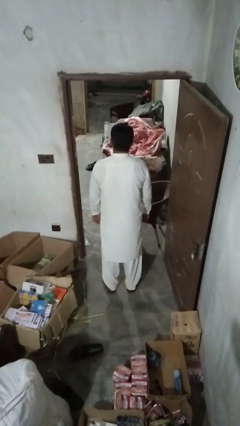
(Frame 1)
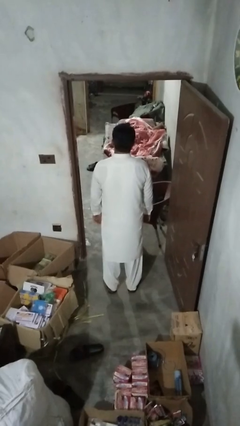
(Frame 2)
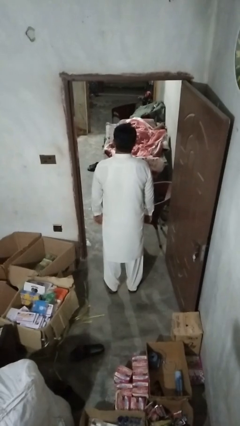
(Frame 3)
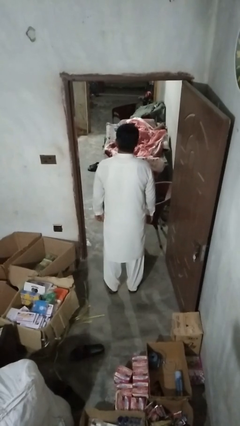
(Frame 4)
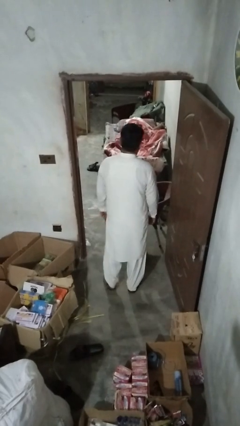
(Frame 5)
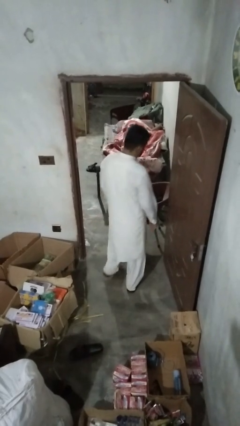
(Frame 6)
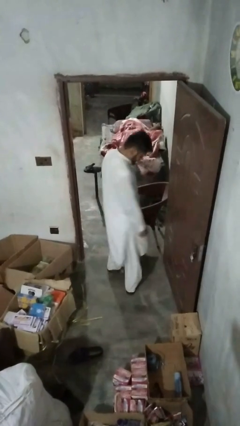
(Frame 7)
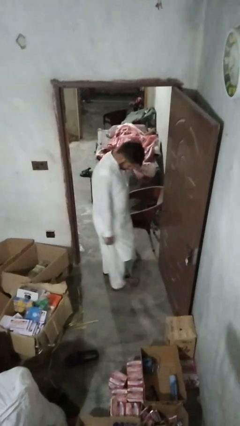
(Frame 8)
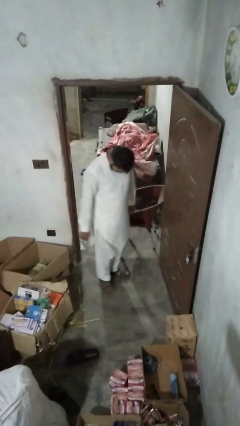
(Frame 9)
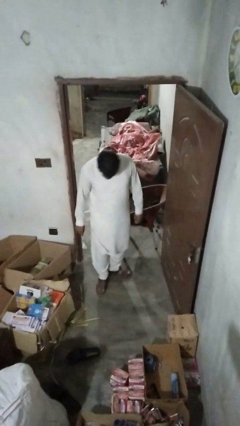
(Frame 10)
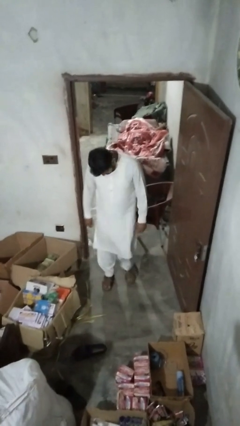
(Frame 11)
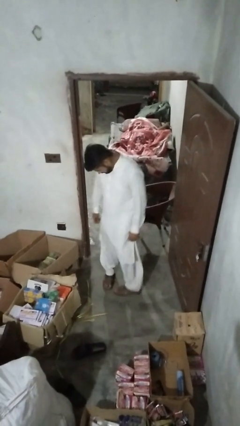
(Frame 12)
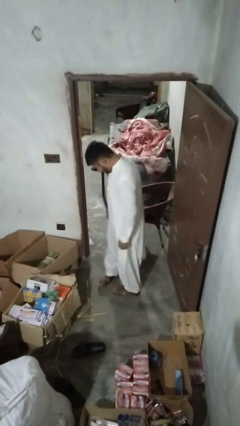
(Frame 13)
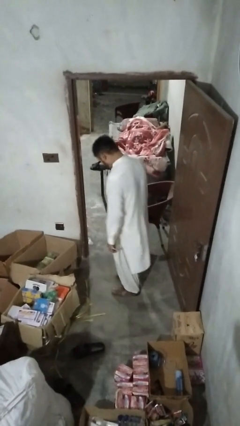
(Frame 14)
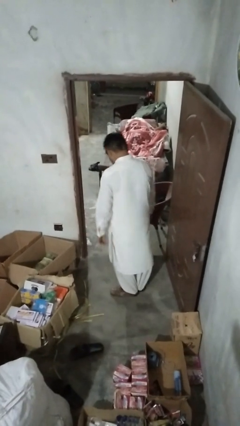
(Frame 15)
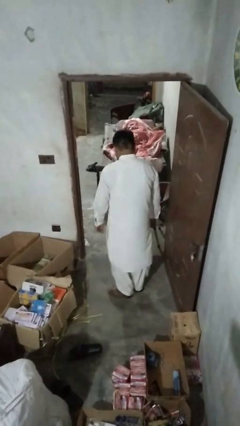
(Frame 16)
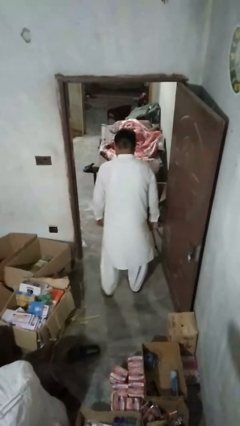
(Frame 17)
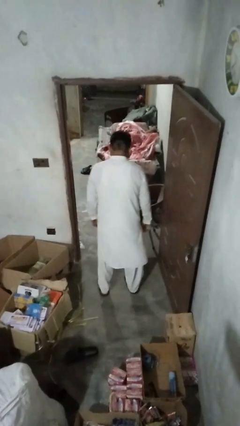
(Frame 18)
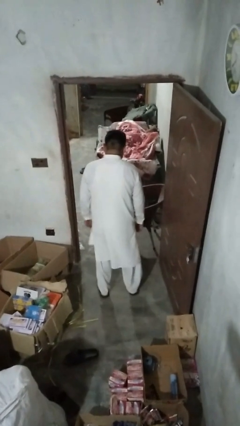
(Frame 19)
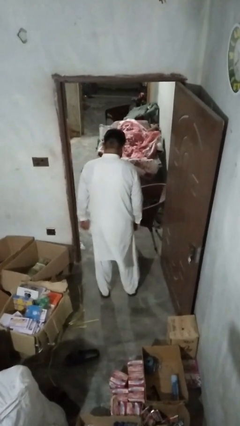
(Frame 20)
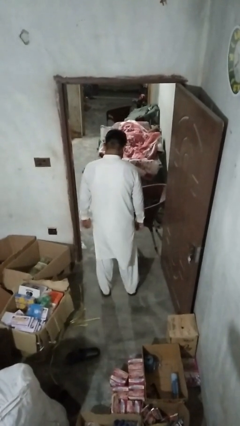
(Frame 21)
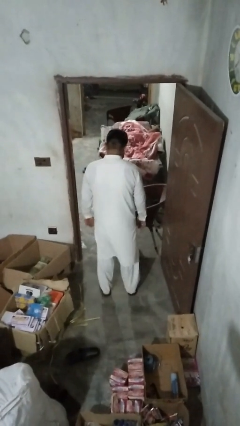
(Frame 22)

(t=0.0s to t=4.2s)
person twirls

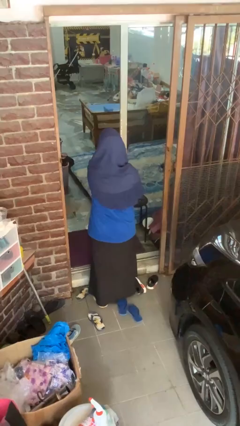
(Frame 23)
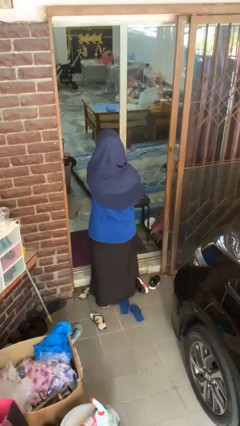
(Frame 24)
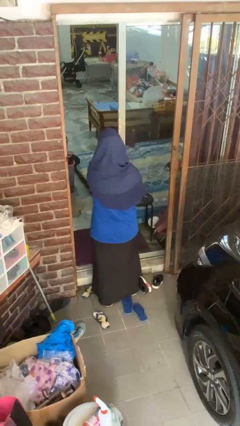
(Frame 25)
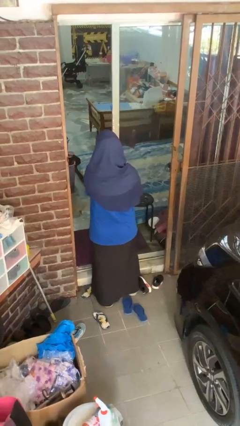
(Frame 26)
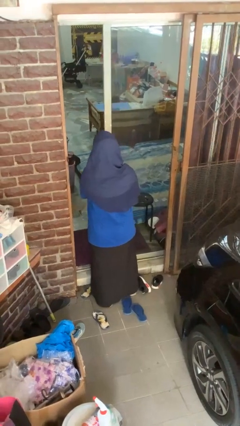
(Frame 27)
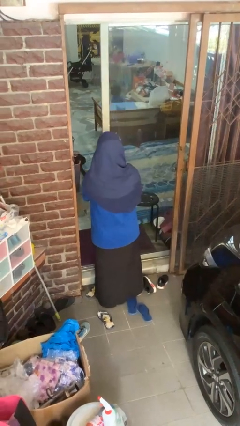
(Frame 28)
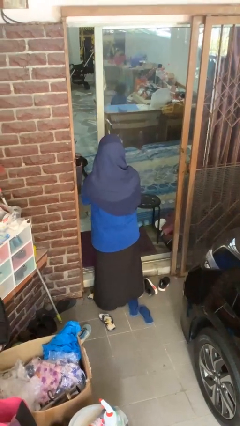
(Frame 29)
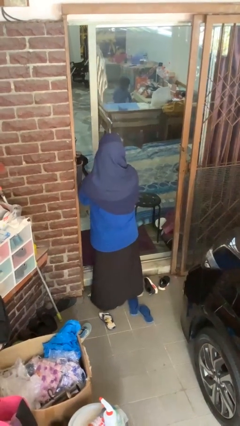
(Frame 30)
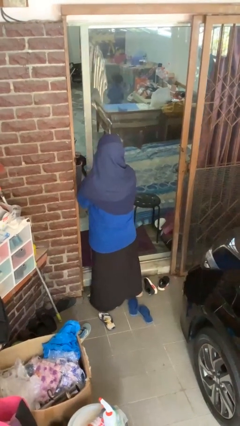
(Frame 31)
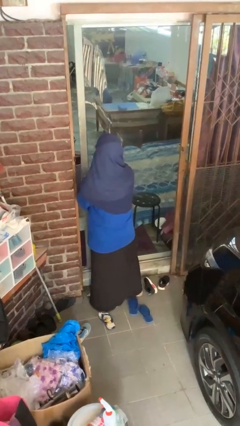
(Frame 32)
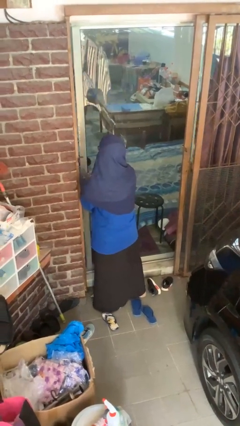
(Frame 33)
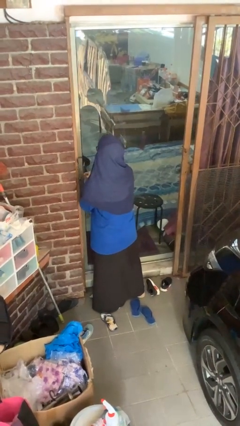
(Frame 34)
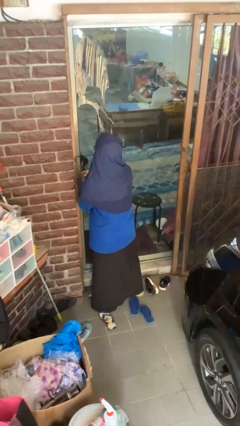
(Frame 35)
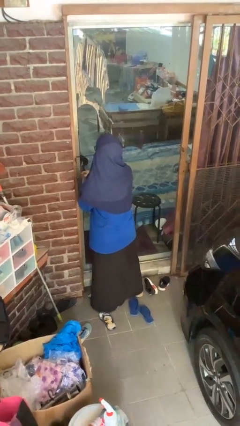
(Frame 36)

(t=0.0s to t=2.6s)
person closes sliding door

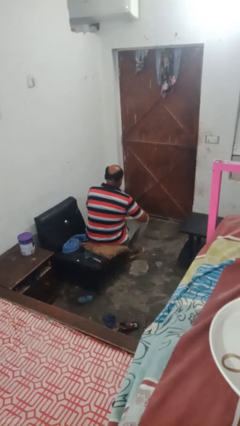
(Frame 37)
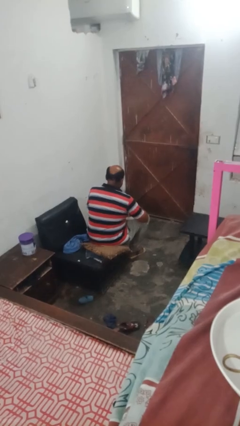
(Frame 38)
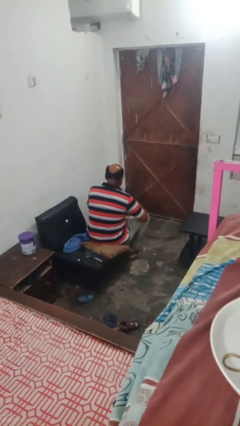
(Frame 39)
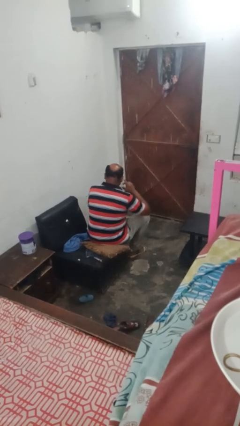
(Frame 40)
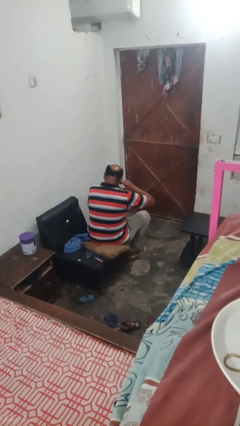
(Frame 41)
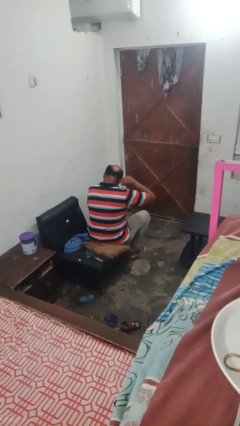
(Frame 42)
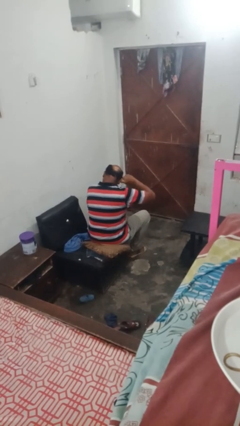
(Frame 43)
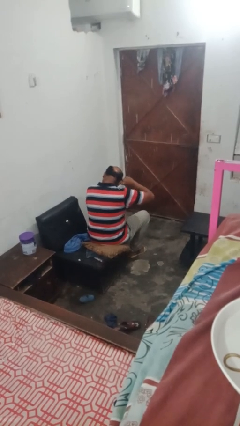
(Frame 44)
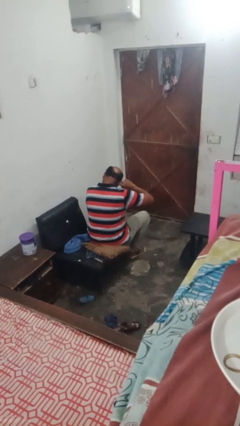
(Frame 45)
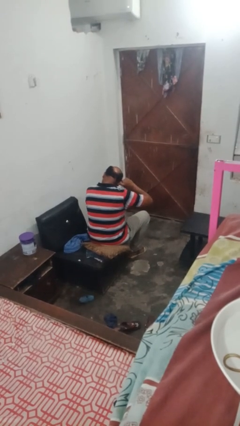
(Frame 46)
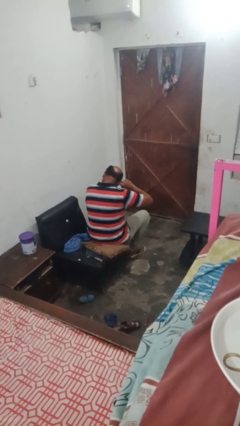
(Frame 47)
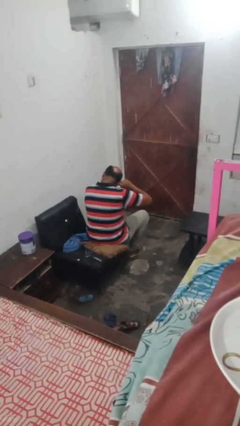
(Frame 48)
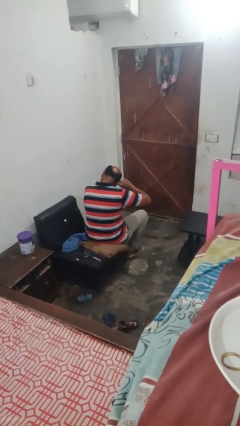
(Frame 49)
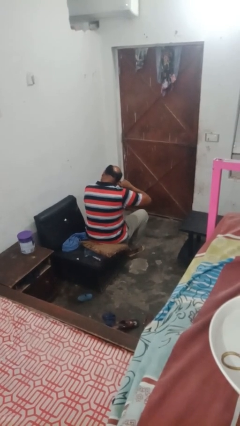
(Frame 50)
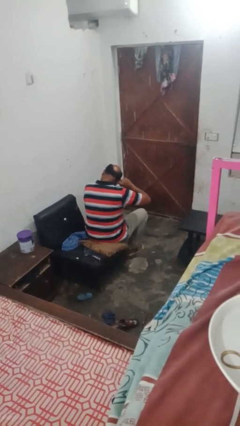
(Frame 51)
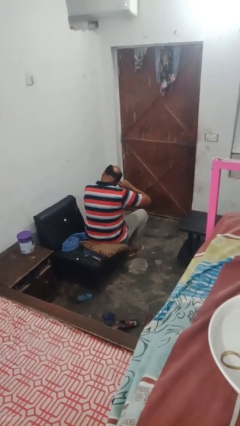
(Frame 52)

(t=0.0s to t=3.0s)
person puts fingers in ear

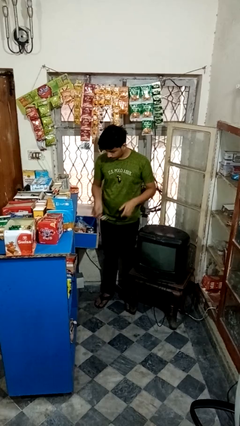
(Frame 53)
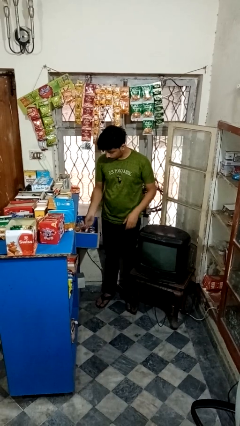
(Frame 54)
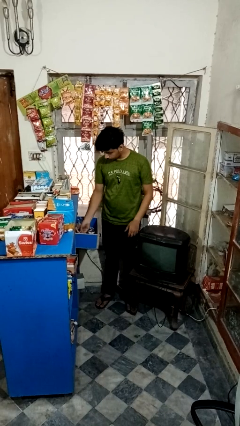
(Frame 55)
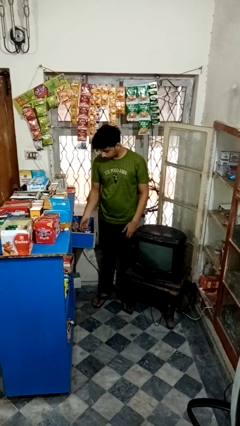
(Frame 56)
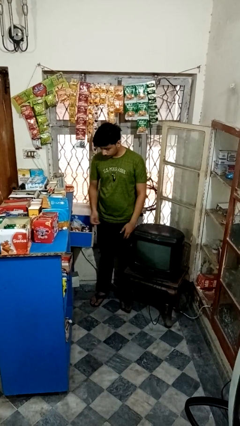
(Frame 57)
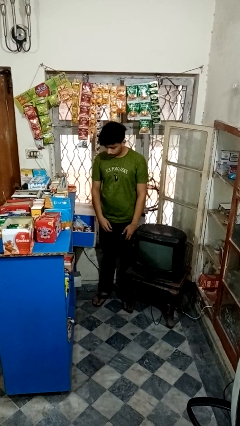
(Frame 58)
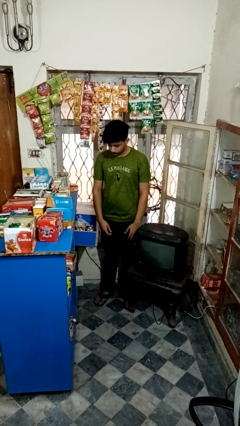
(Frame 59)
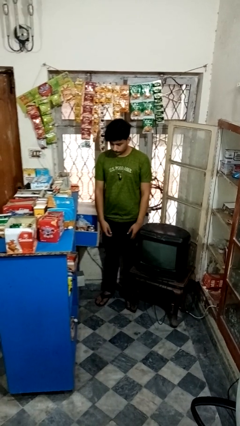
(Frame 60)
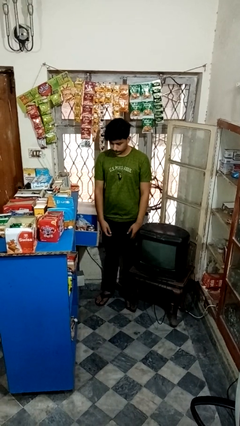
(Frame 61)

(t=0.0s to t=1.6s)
person puts object into kitchen drawer

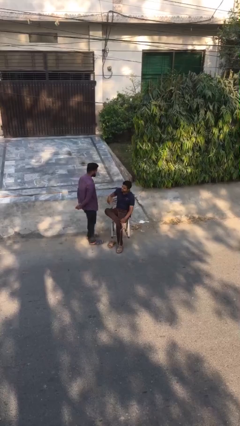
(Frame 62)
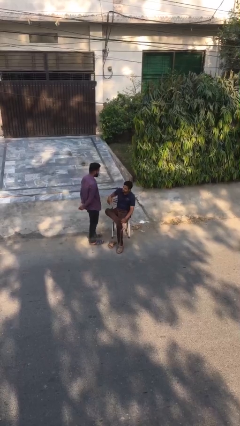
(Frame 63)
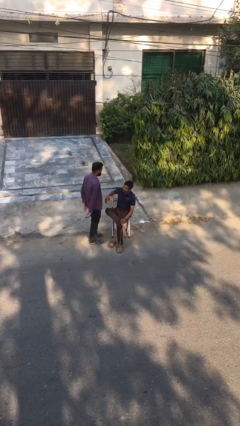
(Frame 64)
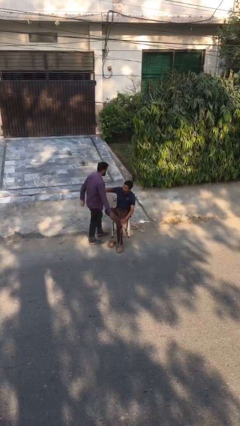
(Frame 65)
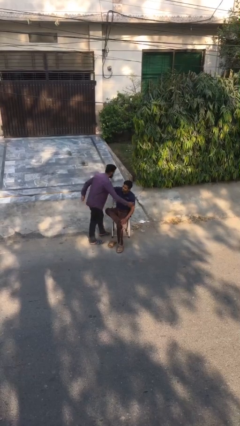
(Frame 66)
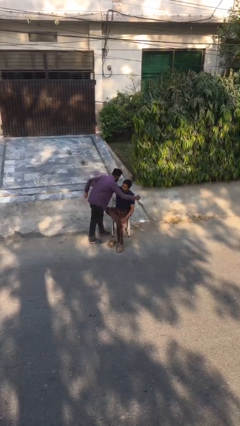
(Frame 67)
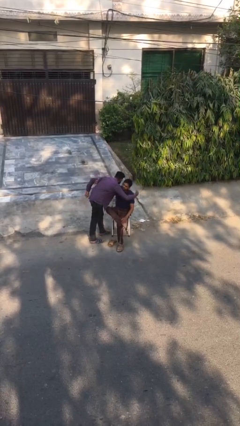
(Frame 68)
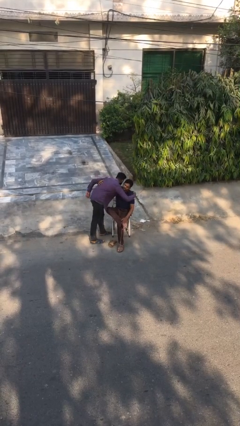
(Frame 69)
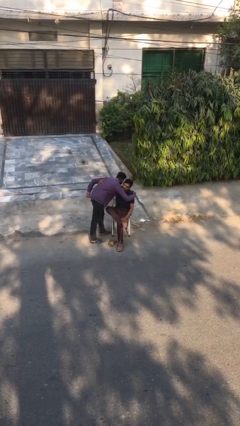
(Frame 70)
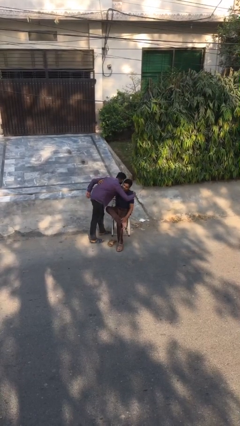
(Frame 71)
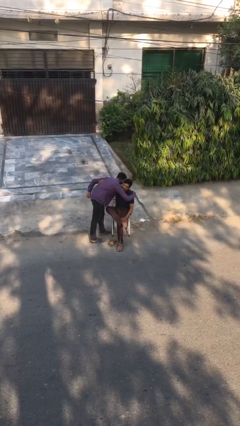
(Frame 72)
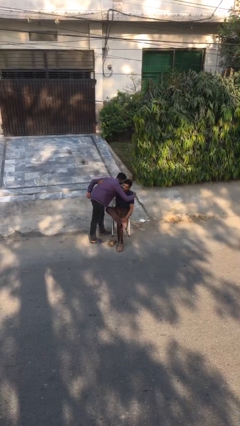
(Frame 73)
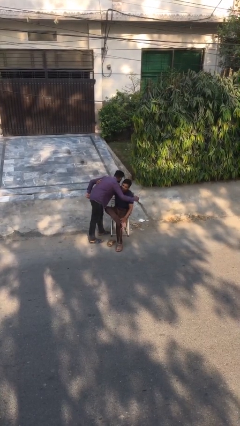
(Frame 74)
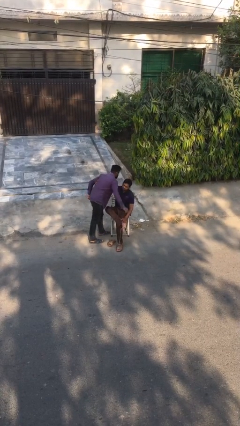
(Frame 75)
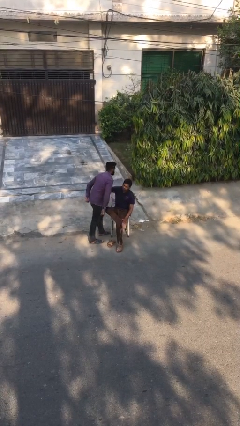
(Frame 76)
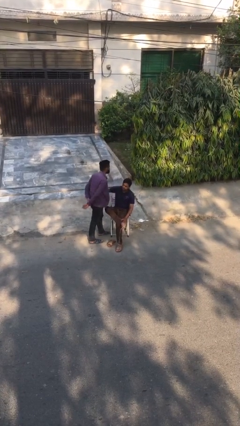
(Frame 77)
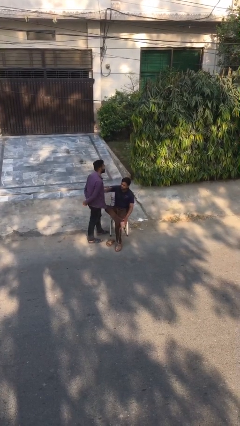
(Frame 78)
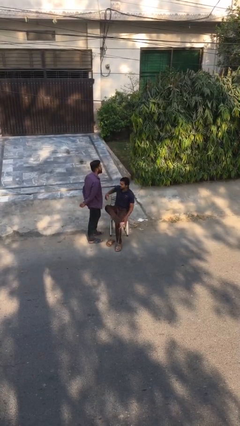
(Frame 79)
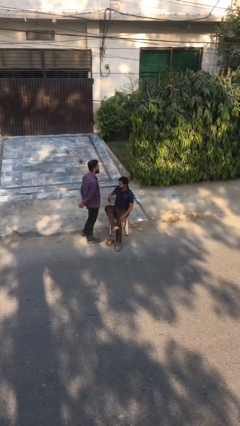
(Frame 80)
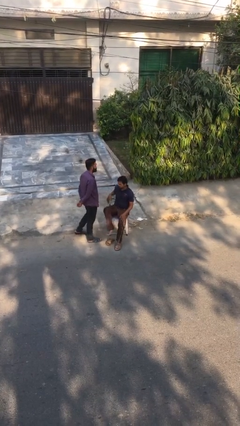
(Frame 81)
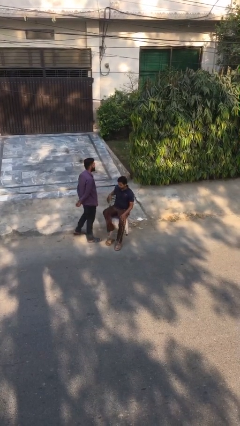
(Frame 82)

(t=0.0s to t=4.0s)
person embraces person

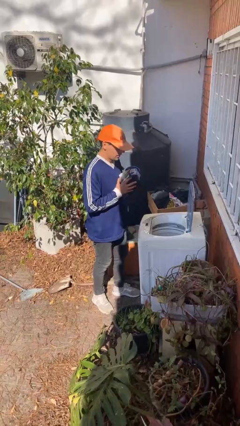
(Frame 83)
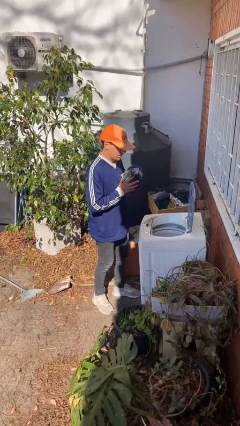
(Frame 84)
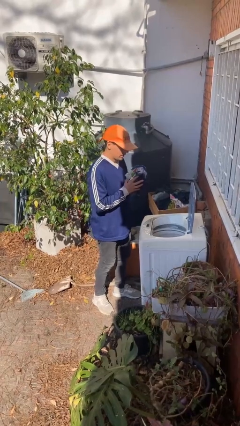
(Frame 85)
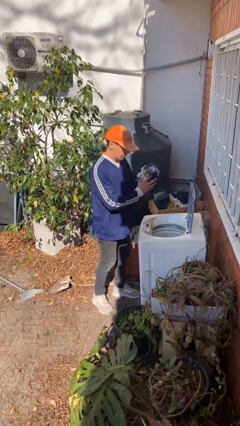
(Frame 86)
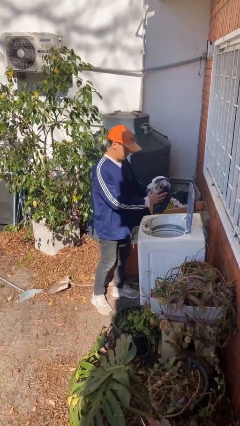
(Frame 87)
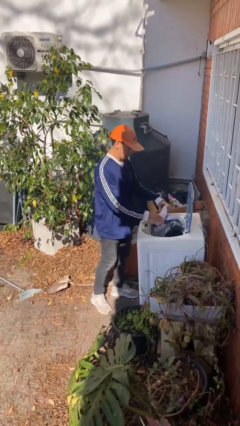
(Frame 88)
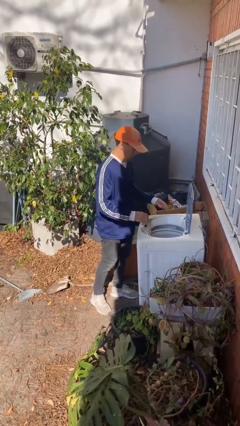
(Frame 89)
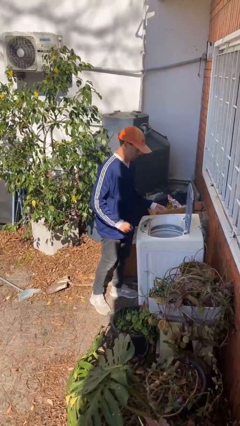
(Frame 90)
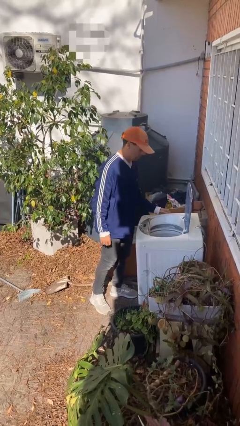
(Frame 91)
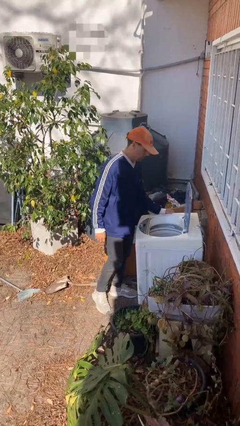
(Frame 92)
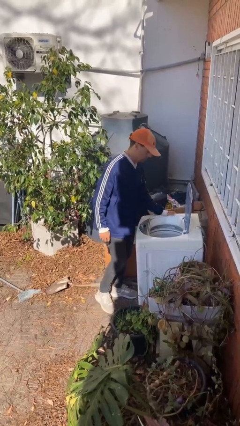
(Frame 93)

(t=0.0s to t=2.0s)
person loads clotheswasher

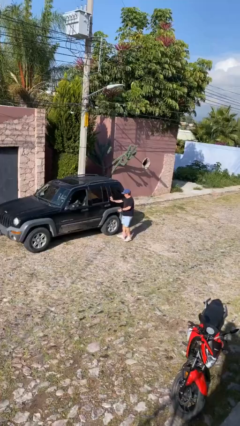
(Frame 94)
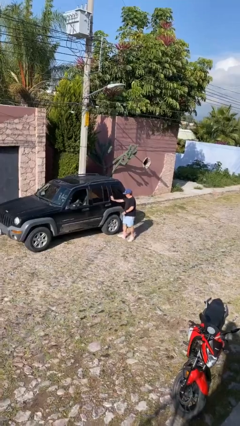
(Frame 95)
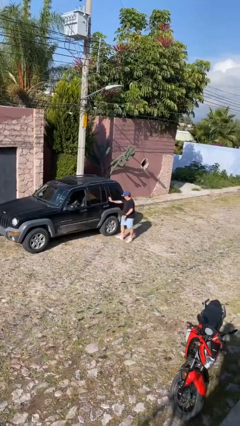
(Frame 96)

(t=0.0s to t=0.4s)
person closes car door
